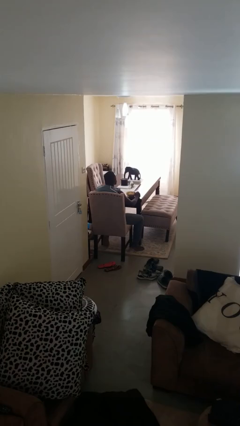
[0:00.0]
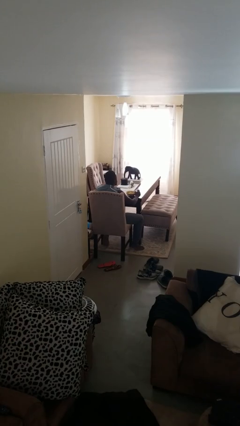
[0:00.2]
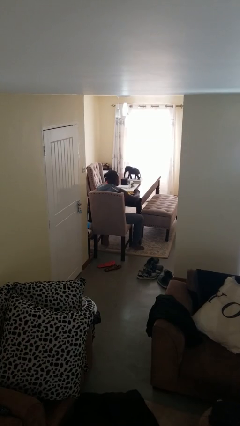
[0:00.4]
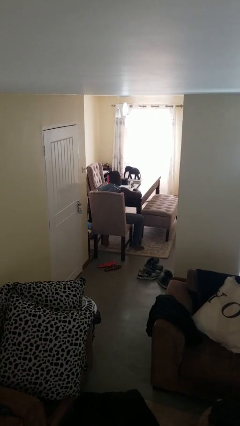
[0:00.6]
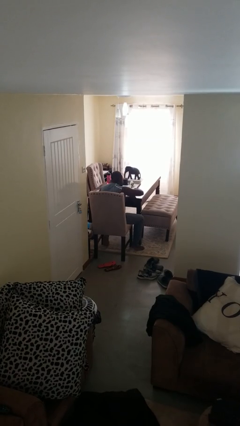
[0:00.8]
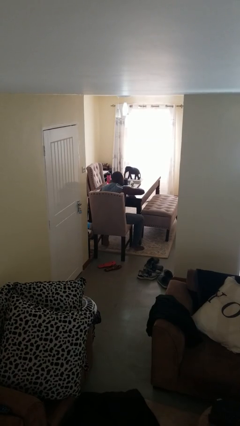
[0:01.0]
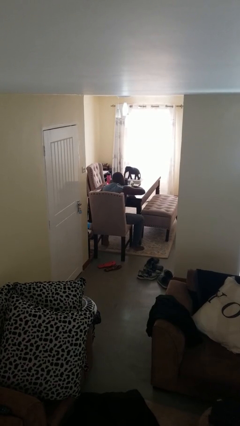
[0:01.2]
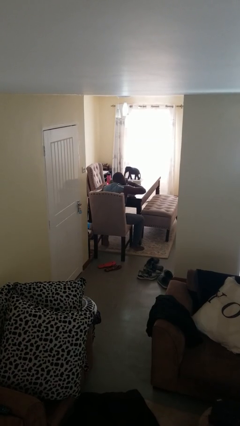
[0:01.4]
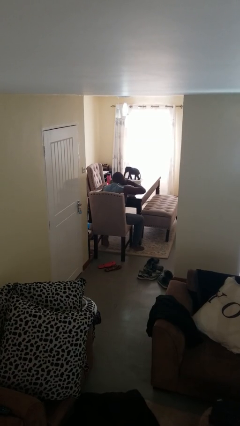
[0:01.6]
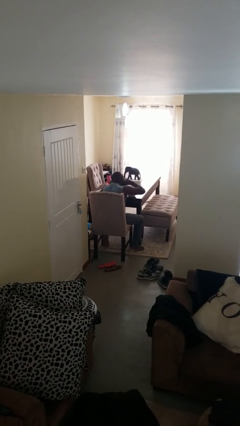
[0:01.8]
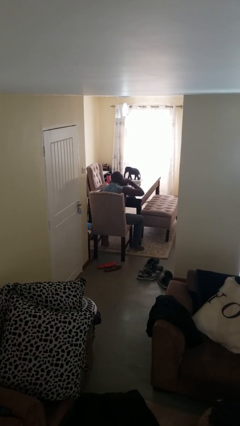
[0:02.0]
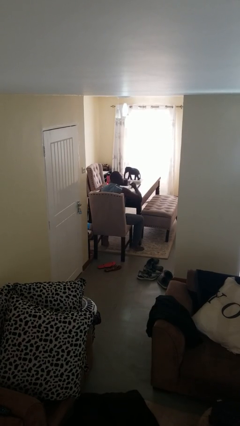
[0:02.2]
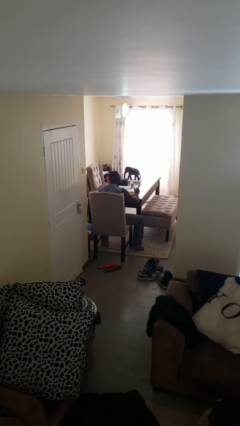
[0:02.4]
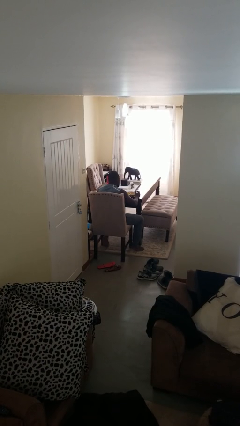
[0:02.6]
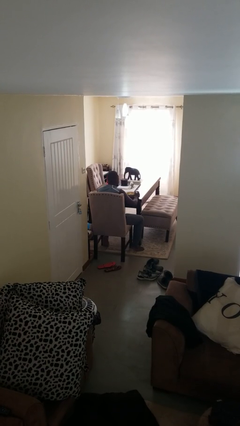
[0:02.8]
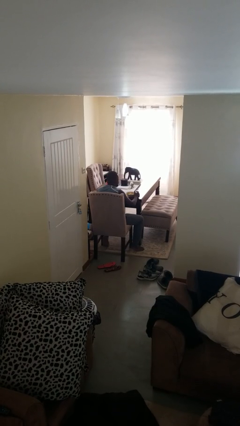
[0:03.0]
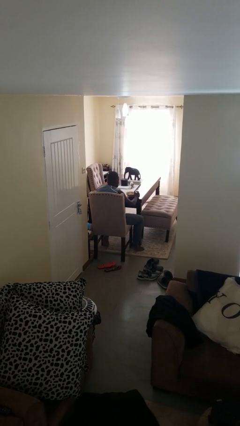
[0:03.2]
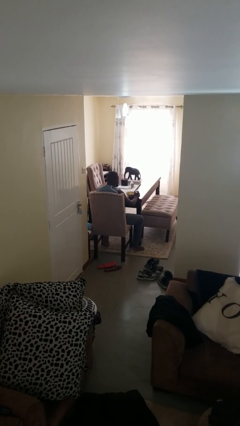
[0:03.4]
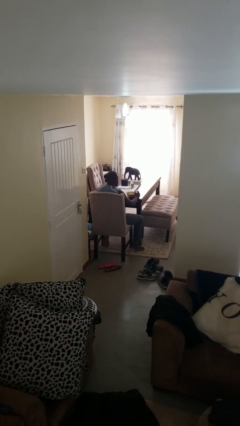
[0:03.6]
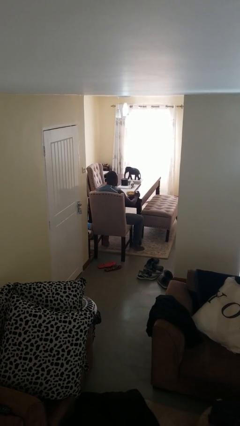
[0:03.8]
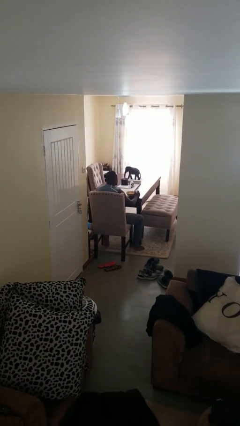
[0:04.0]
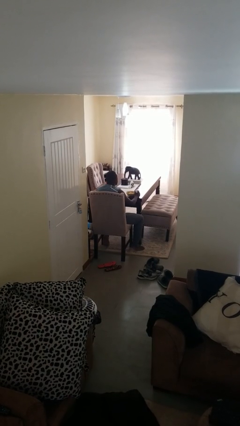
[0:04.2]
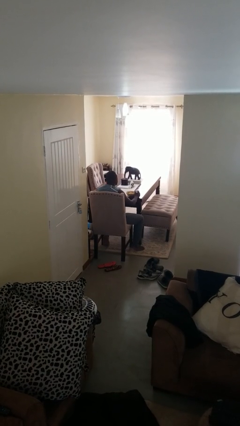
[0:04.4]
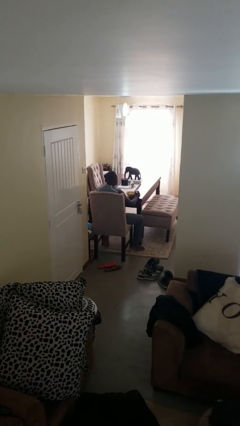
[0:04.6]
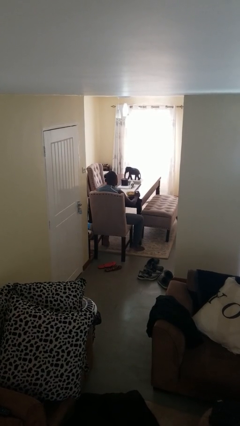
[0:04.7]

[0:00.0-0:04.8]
person eats with hands

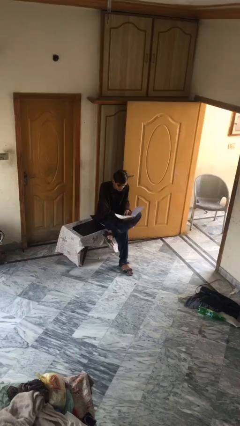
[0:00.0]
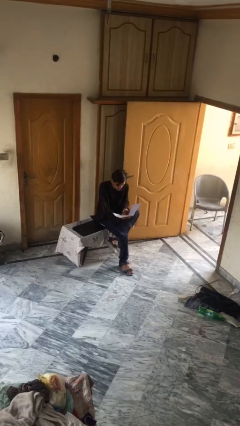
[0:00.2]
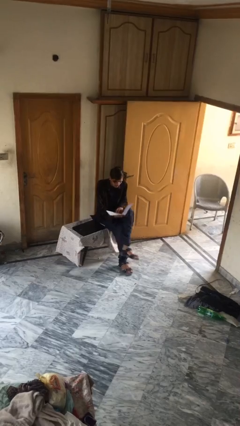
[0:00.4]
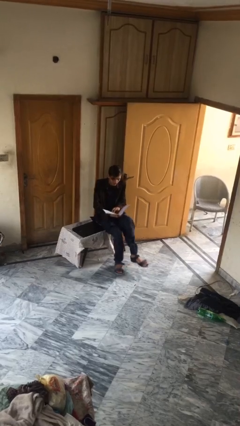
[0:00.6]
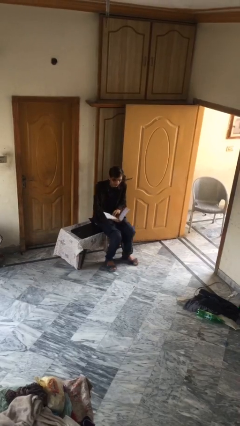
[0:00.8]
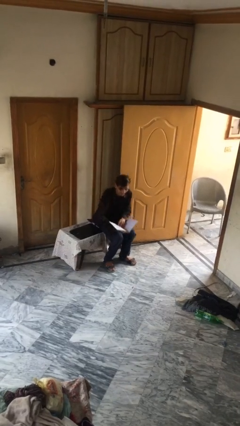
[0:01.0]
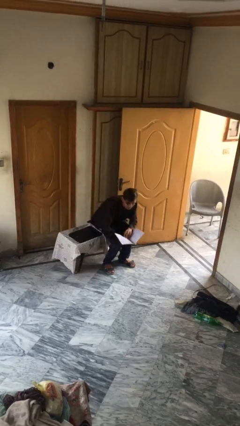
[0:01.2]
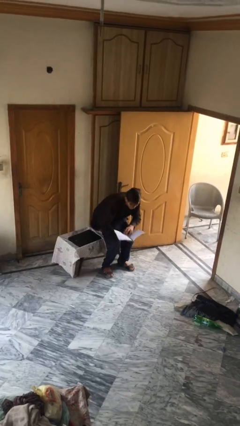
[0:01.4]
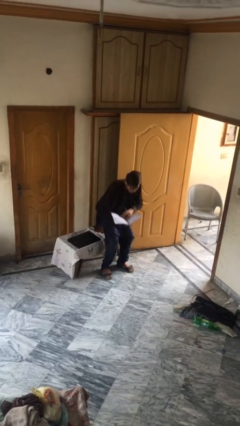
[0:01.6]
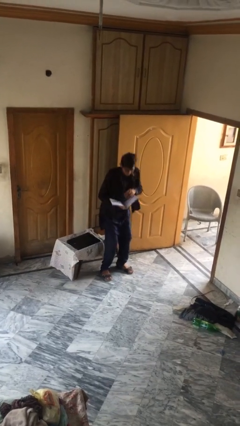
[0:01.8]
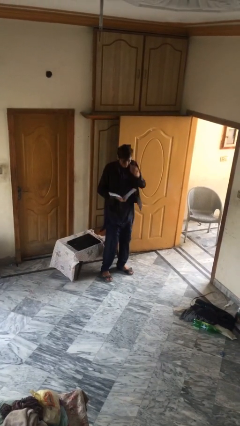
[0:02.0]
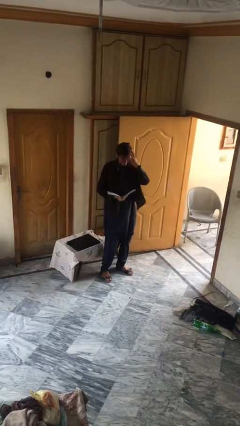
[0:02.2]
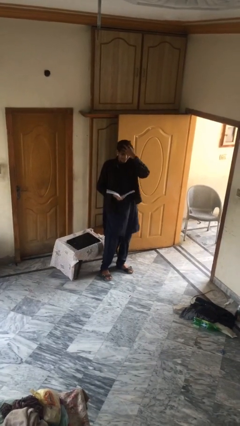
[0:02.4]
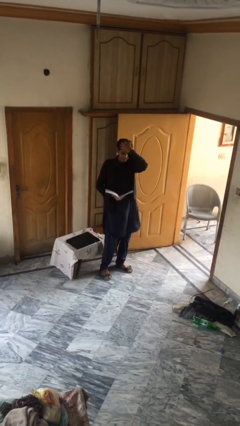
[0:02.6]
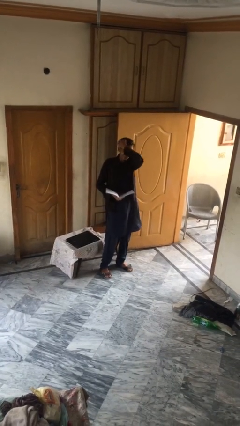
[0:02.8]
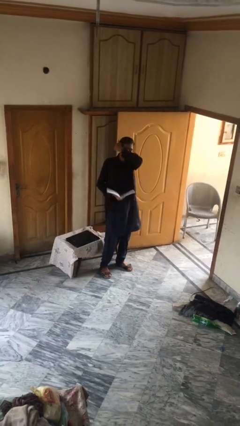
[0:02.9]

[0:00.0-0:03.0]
person stands up

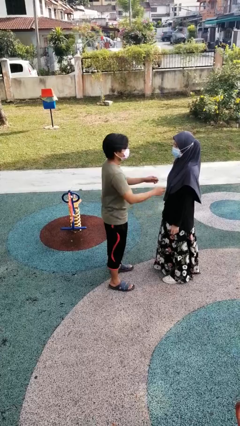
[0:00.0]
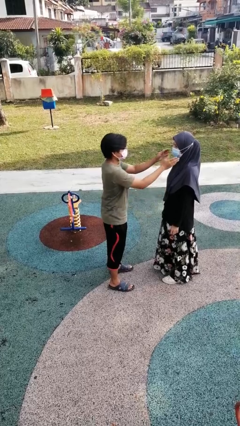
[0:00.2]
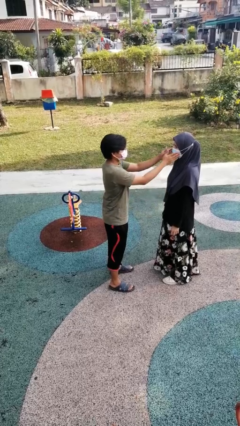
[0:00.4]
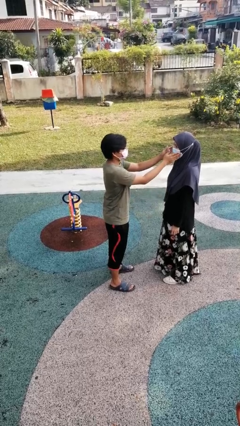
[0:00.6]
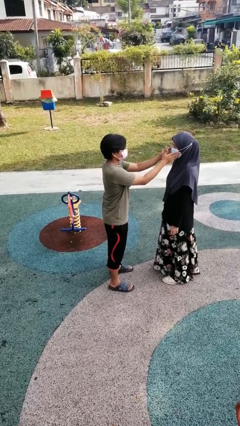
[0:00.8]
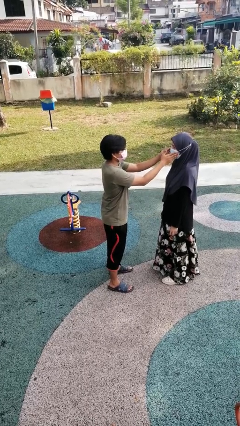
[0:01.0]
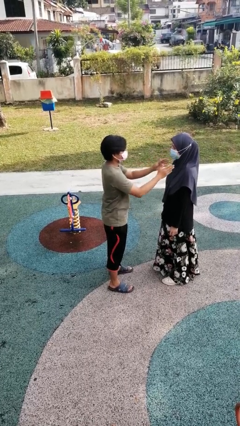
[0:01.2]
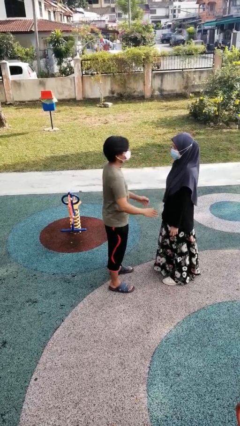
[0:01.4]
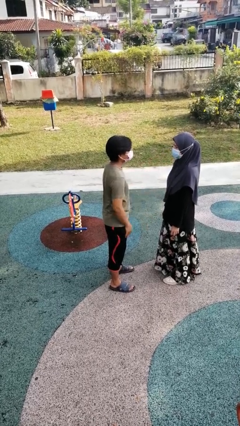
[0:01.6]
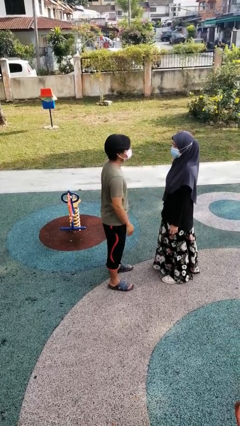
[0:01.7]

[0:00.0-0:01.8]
person touches face of person

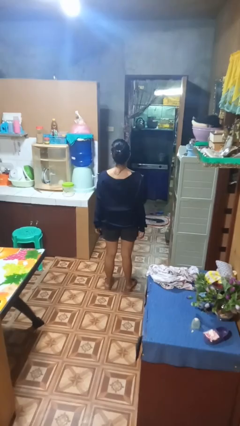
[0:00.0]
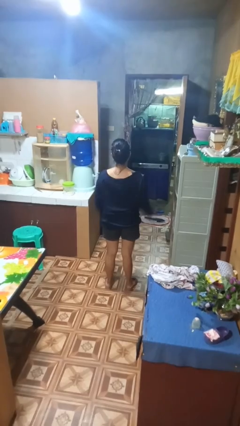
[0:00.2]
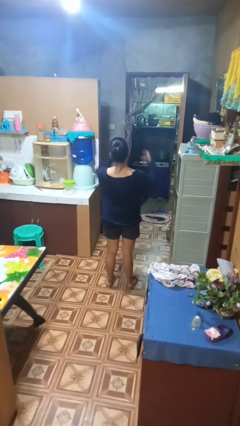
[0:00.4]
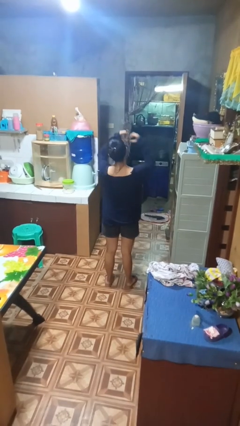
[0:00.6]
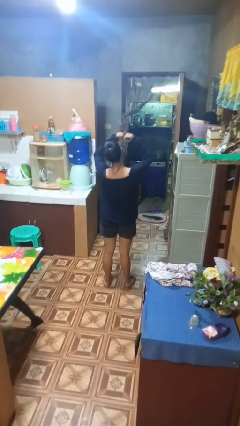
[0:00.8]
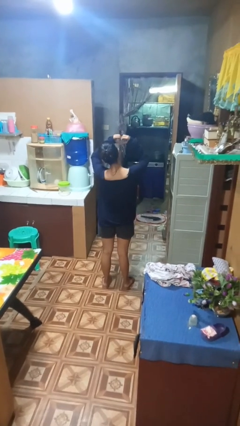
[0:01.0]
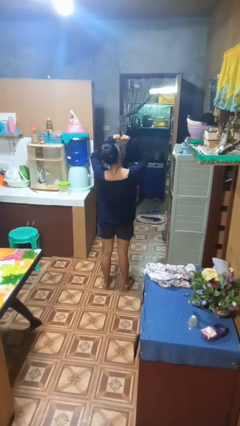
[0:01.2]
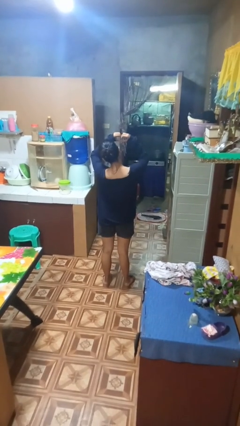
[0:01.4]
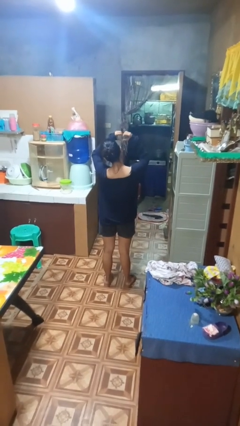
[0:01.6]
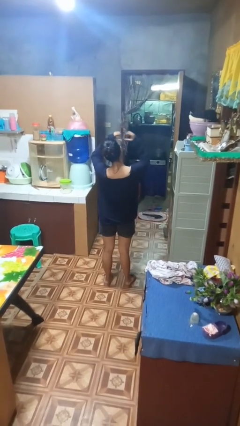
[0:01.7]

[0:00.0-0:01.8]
person gestures heart

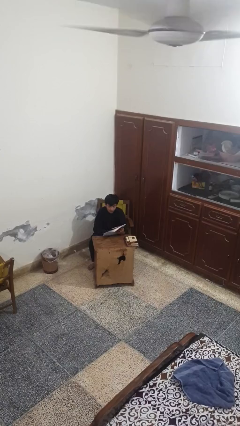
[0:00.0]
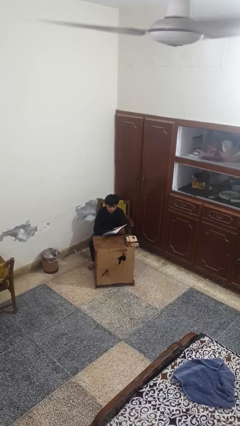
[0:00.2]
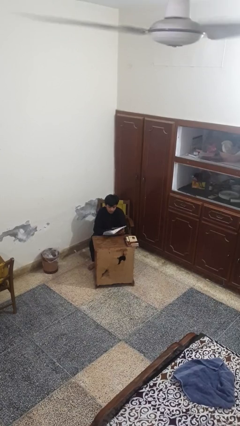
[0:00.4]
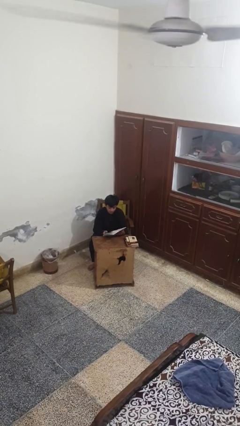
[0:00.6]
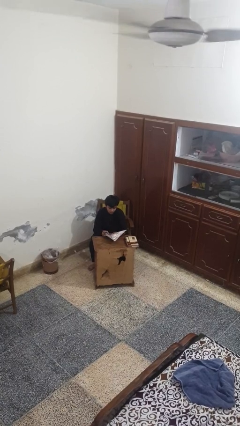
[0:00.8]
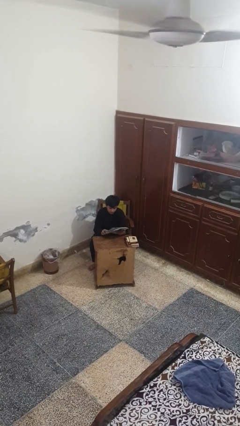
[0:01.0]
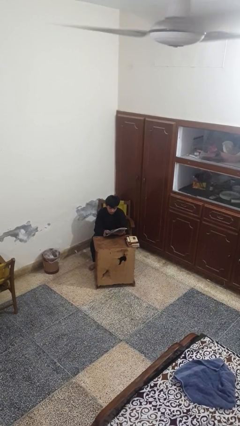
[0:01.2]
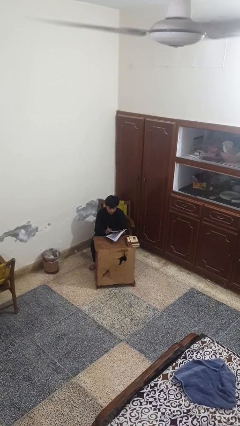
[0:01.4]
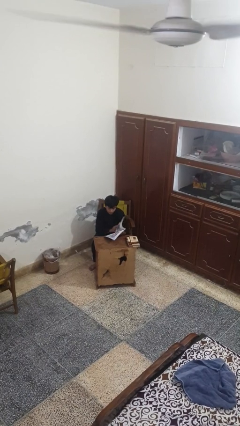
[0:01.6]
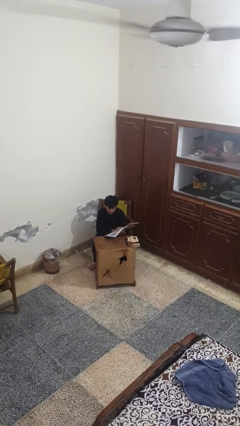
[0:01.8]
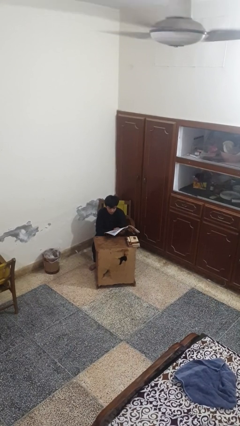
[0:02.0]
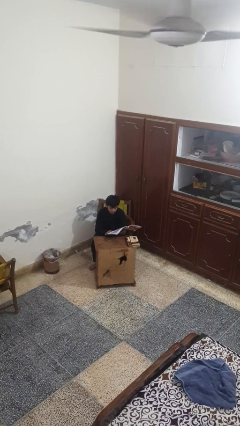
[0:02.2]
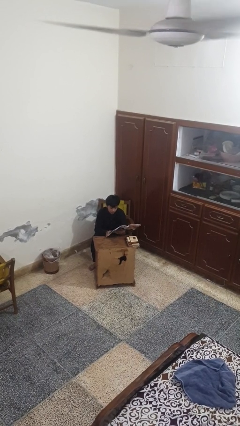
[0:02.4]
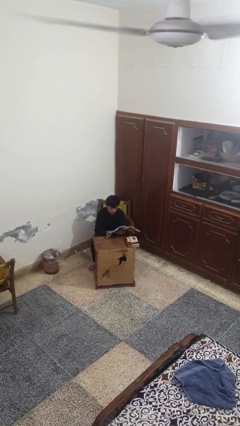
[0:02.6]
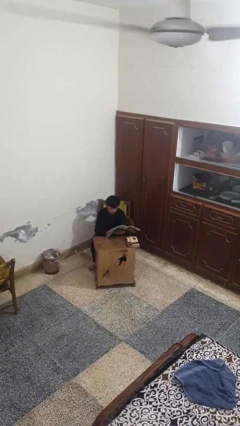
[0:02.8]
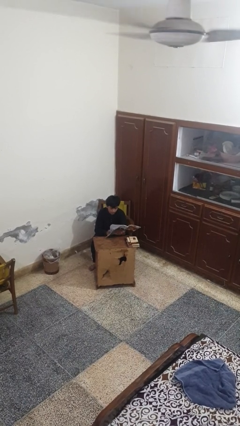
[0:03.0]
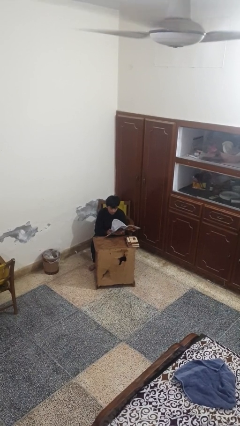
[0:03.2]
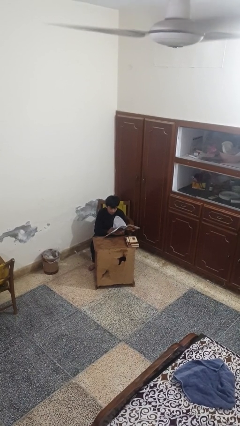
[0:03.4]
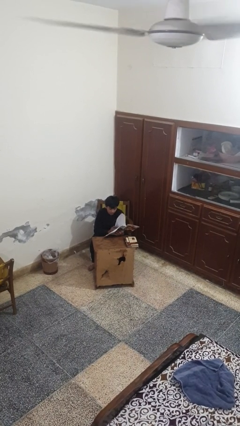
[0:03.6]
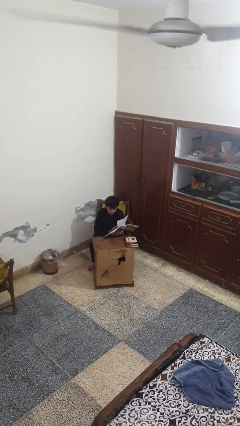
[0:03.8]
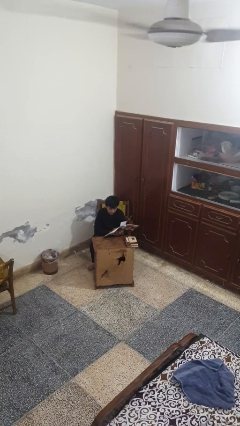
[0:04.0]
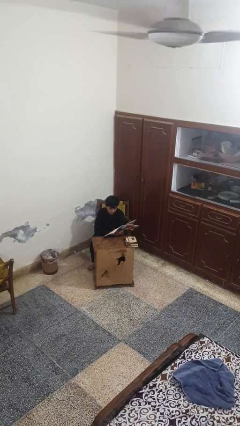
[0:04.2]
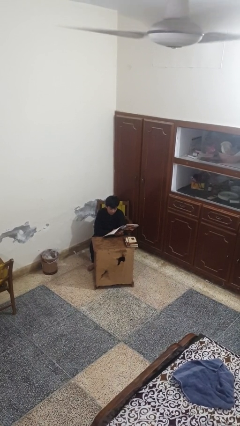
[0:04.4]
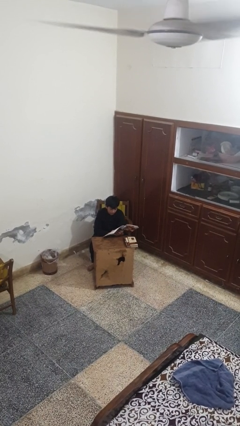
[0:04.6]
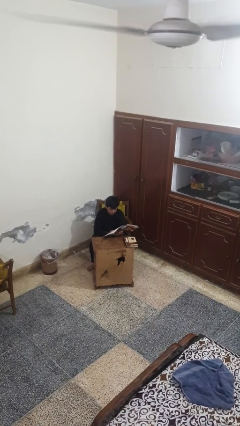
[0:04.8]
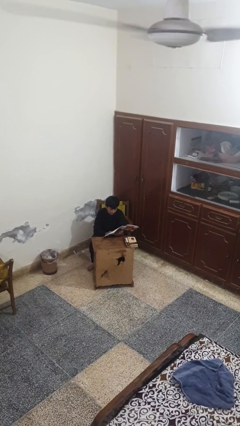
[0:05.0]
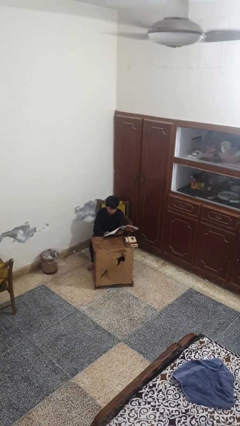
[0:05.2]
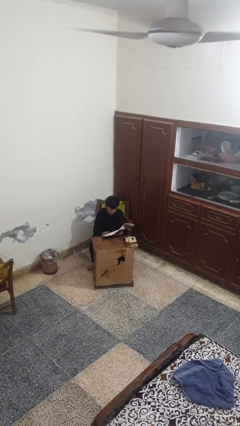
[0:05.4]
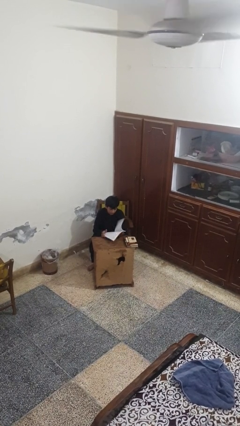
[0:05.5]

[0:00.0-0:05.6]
person reads magazine

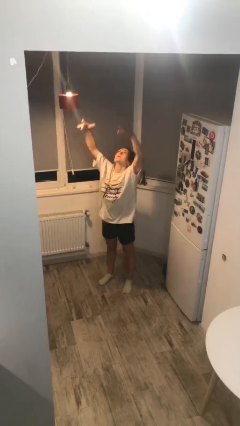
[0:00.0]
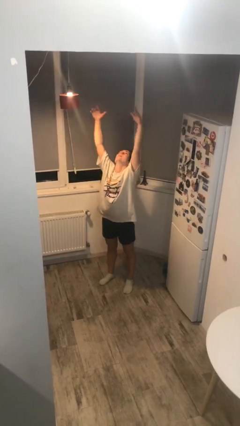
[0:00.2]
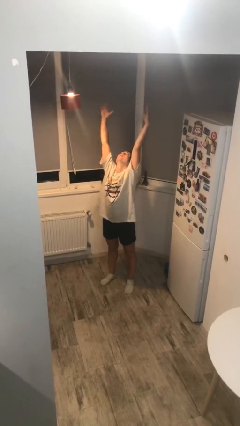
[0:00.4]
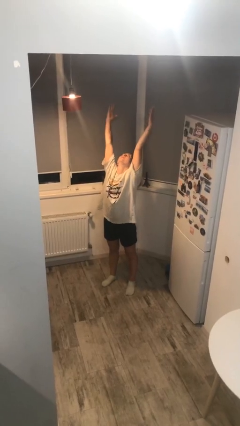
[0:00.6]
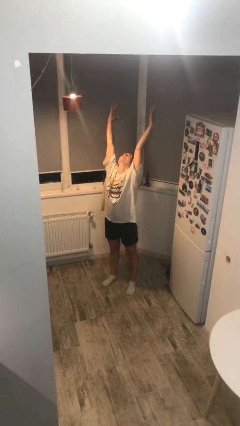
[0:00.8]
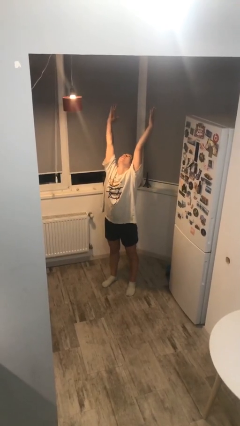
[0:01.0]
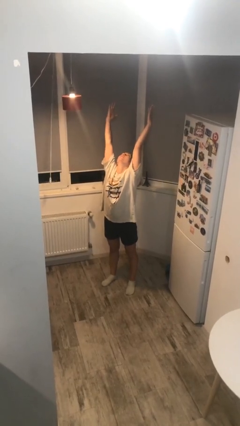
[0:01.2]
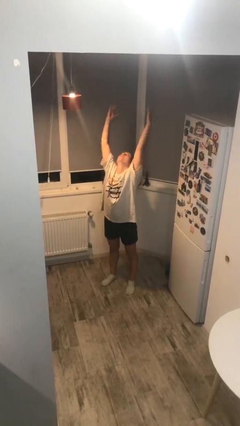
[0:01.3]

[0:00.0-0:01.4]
person stretches arms over head
